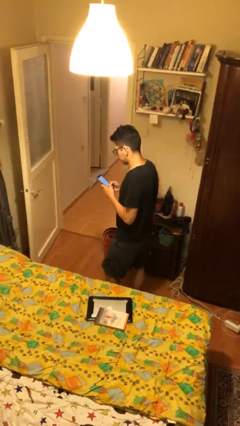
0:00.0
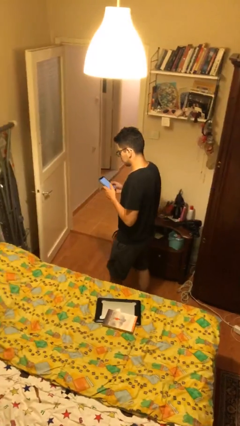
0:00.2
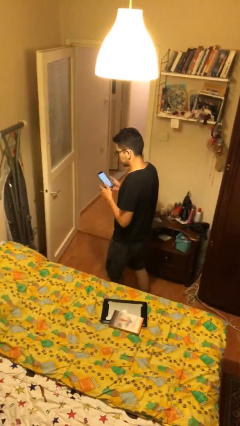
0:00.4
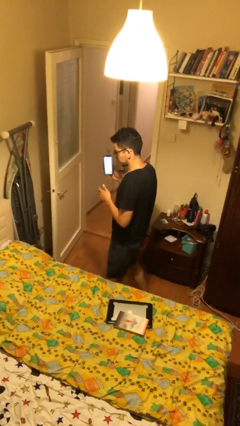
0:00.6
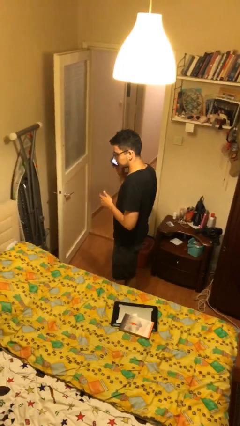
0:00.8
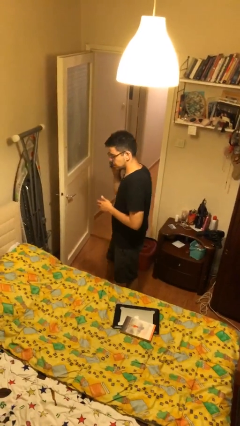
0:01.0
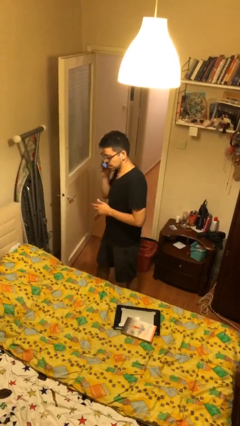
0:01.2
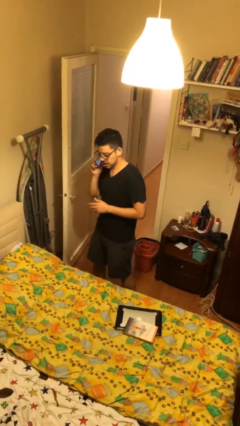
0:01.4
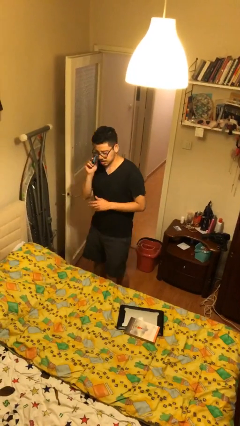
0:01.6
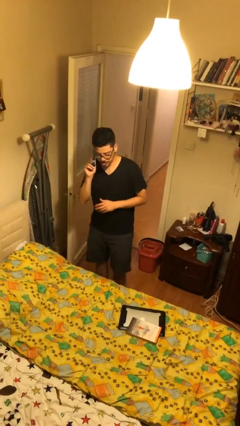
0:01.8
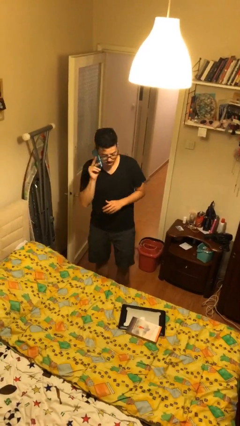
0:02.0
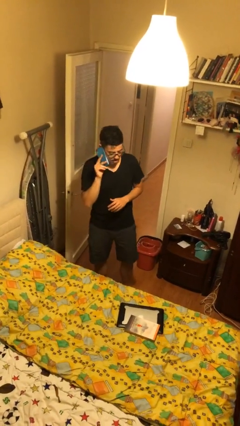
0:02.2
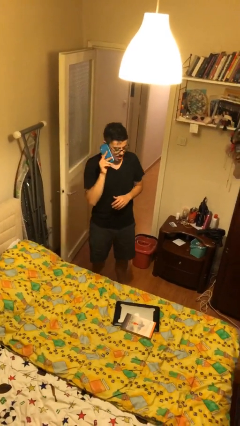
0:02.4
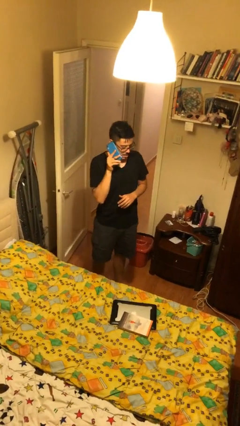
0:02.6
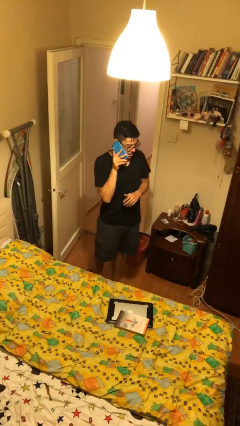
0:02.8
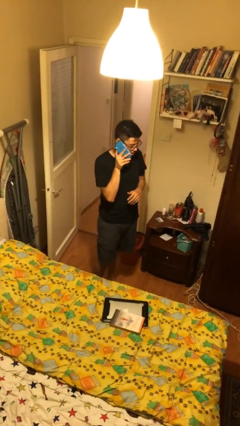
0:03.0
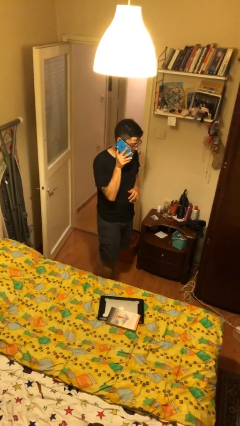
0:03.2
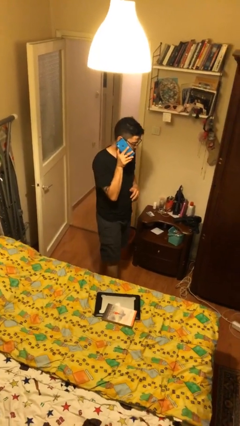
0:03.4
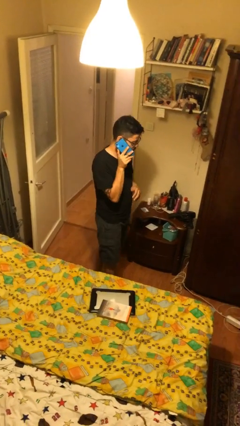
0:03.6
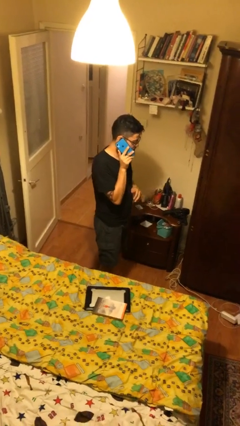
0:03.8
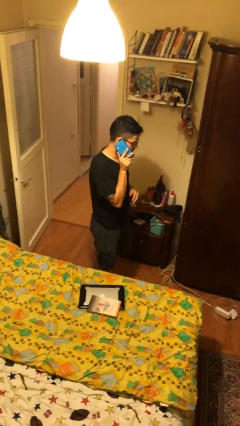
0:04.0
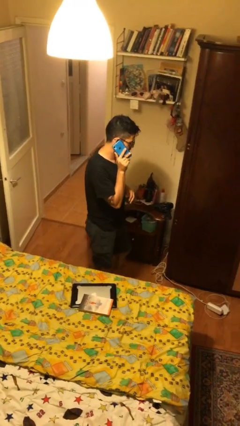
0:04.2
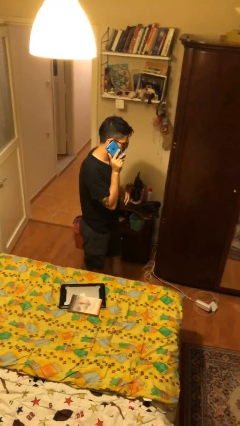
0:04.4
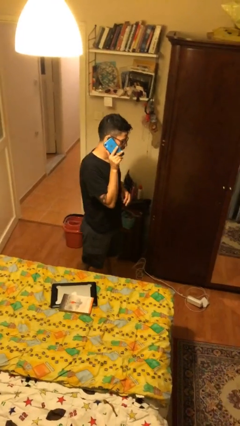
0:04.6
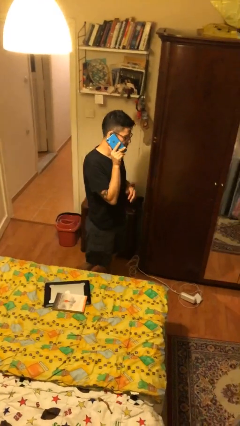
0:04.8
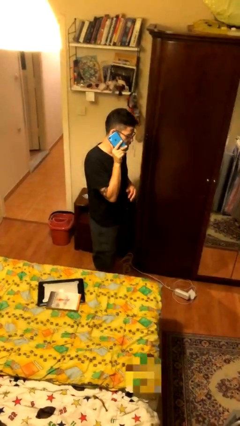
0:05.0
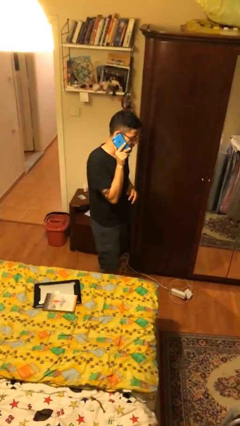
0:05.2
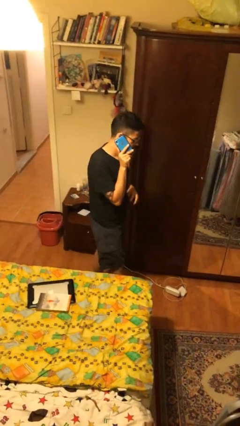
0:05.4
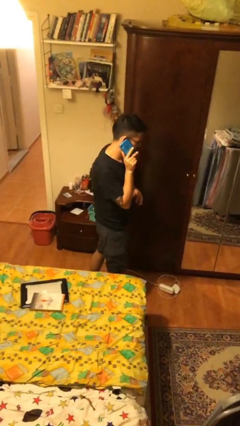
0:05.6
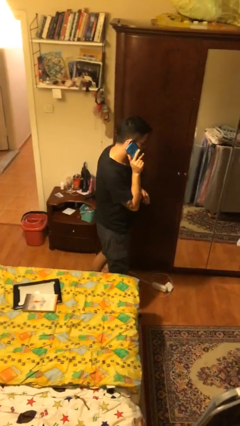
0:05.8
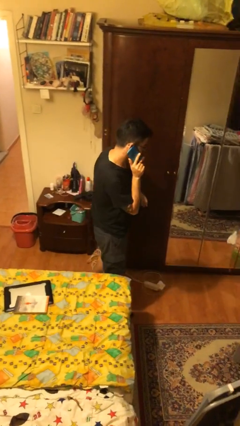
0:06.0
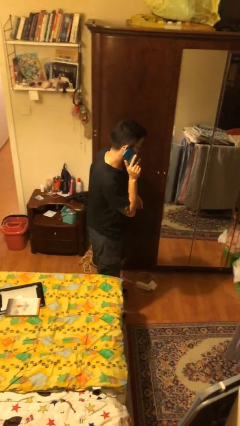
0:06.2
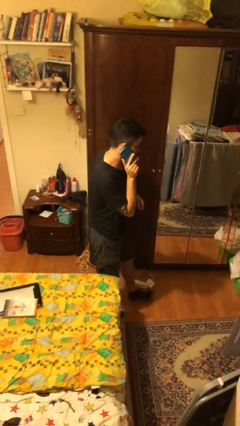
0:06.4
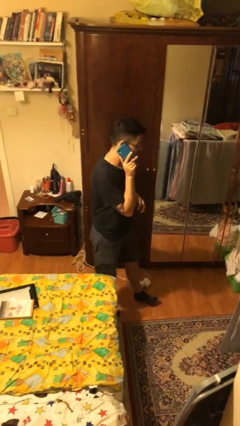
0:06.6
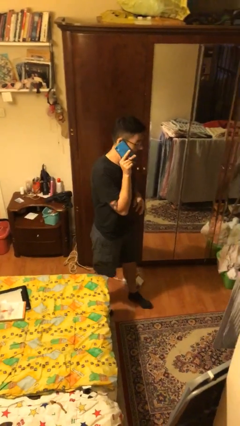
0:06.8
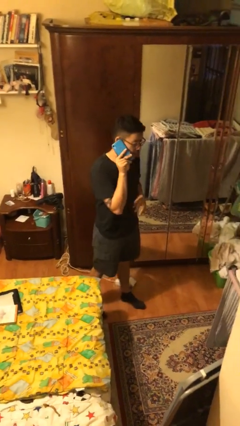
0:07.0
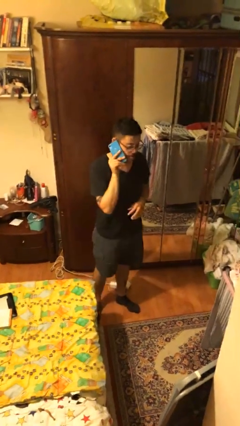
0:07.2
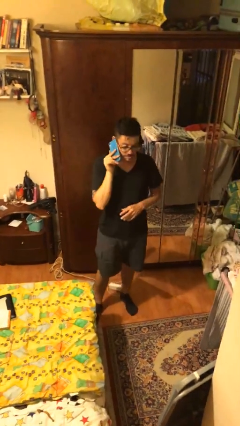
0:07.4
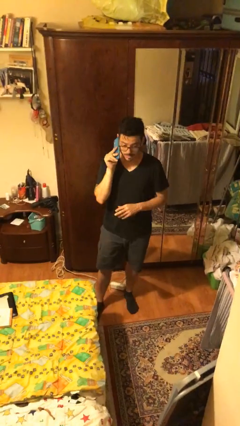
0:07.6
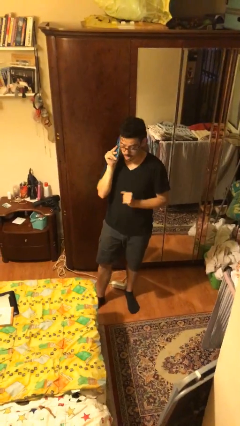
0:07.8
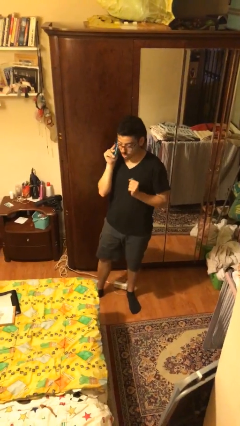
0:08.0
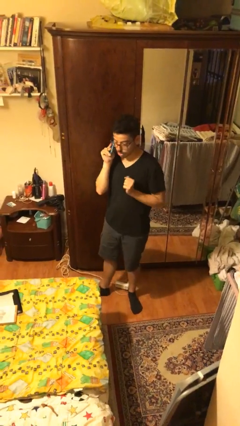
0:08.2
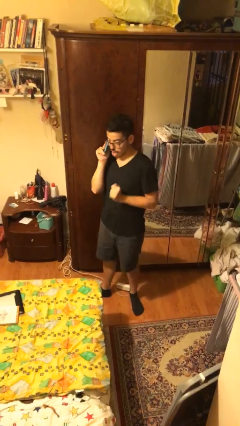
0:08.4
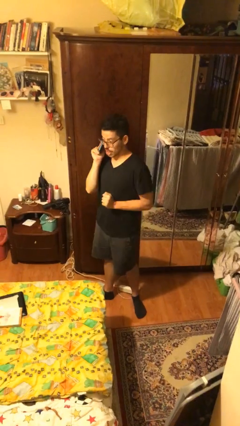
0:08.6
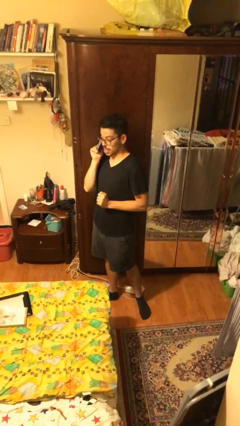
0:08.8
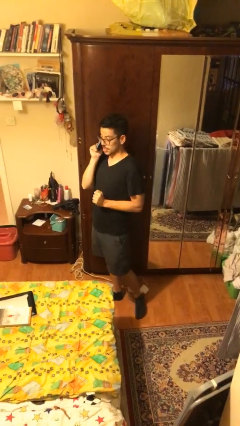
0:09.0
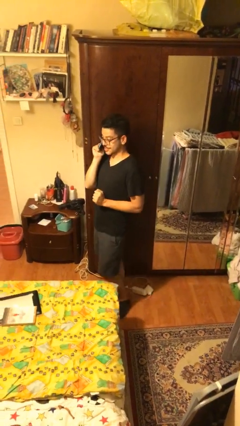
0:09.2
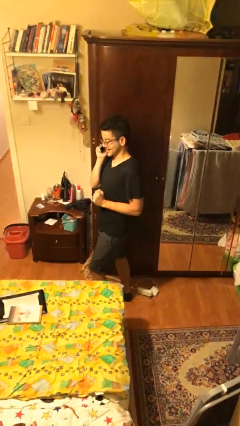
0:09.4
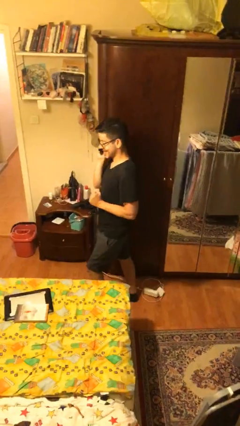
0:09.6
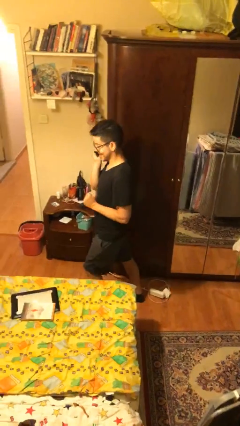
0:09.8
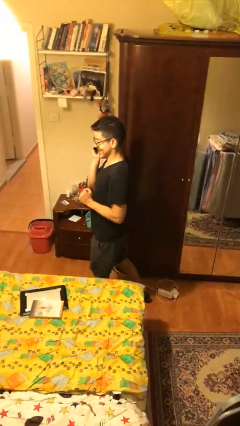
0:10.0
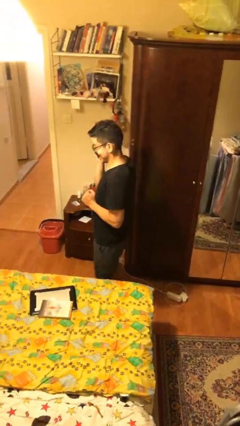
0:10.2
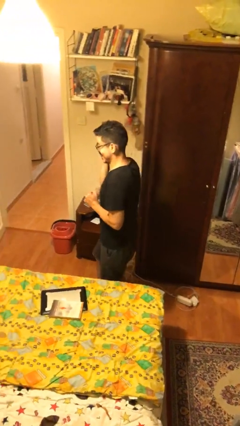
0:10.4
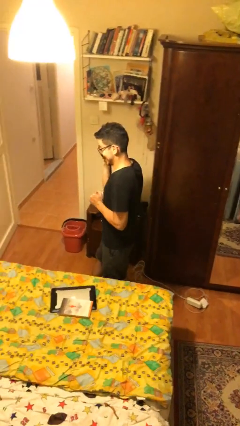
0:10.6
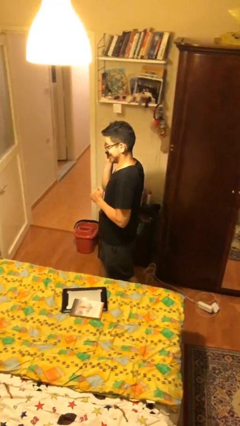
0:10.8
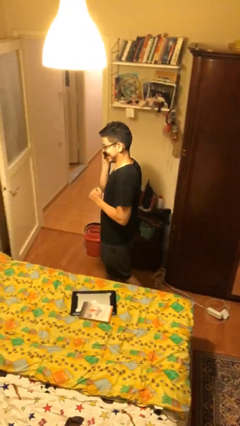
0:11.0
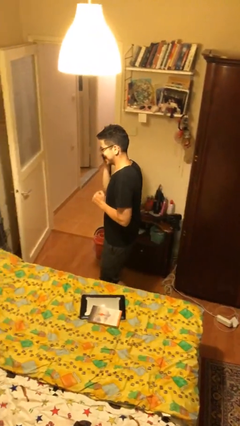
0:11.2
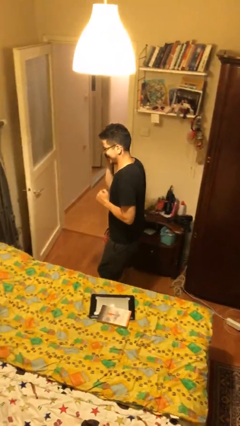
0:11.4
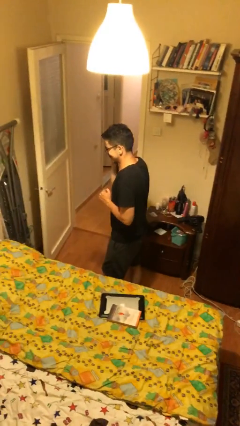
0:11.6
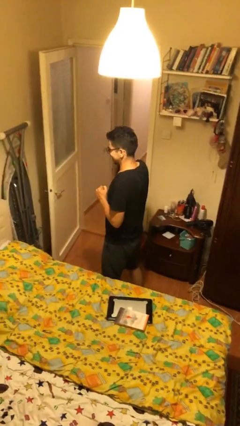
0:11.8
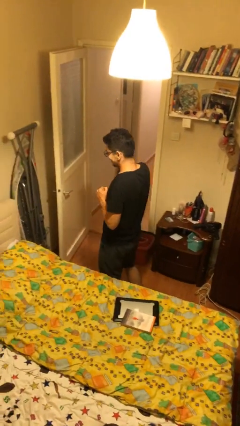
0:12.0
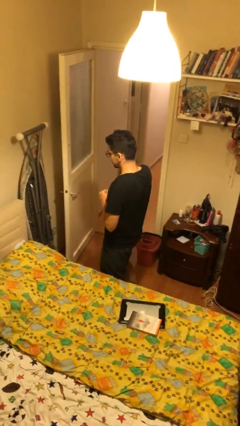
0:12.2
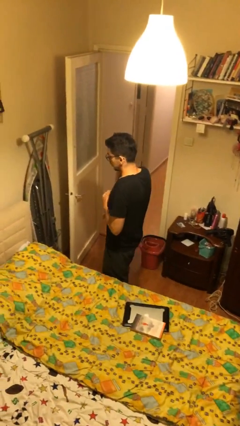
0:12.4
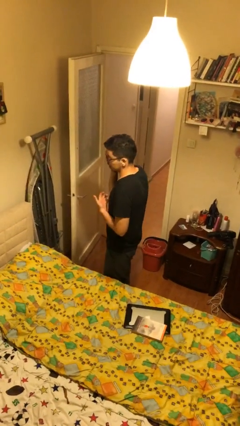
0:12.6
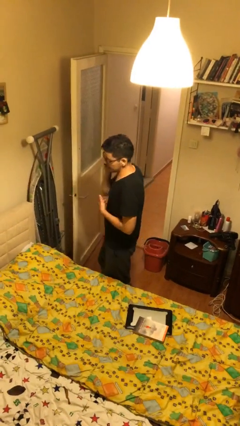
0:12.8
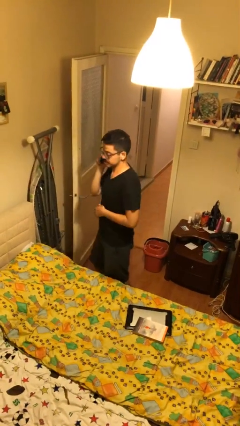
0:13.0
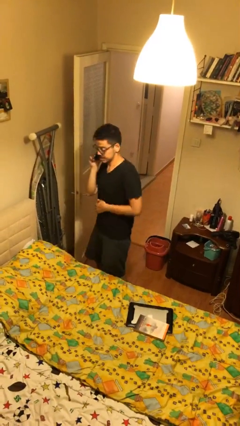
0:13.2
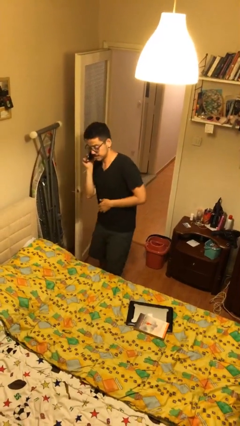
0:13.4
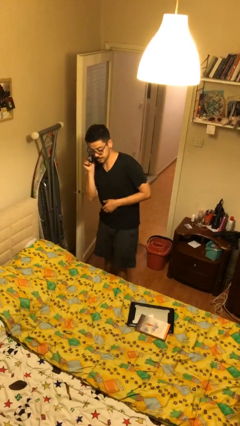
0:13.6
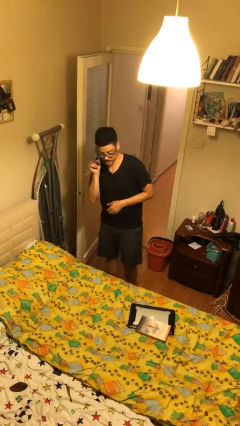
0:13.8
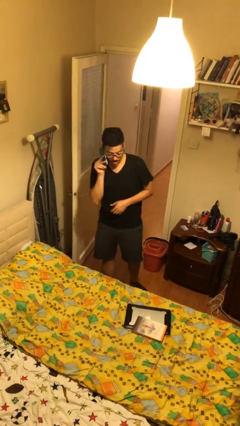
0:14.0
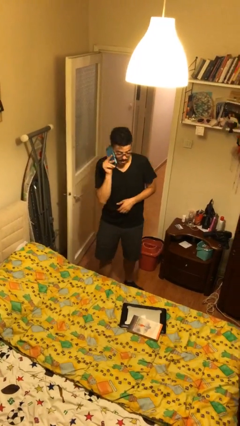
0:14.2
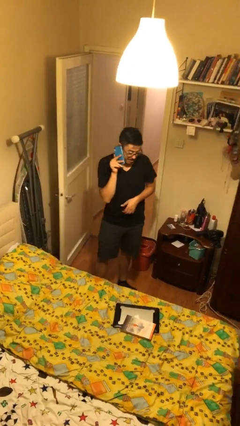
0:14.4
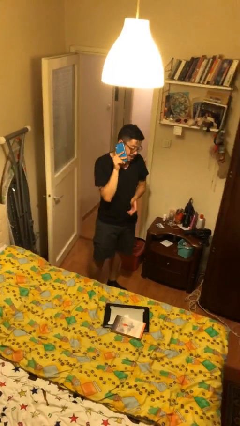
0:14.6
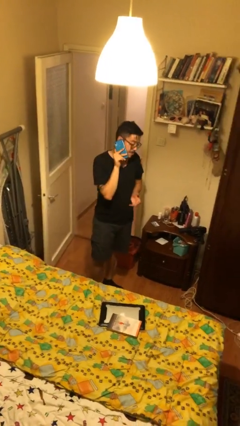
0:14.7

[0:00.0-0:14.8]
person talks on phone

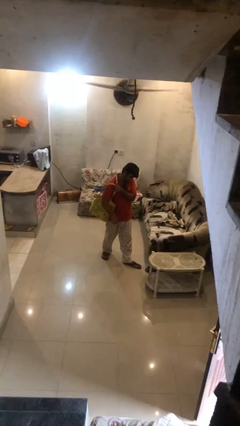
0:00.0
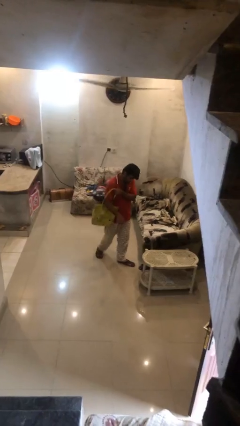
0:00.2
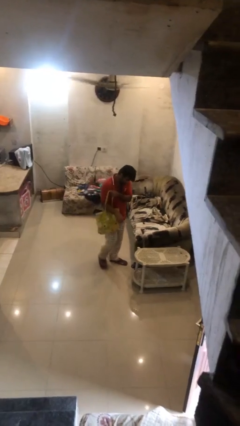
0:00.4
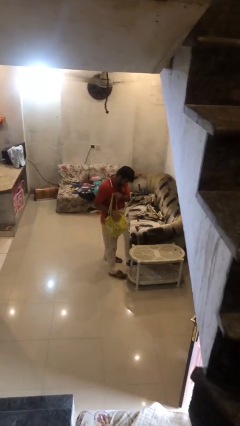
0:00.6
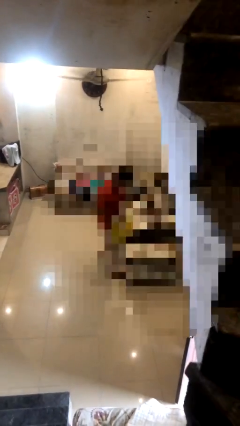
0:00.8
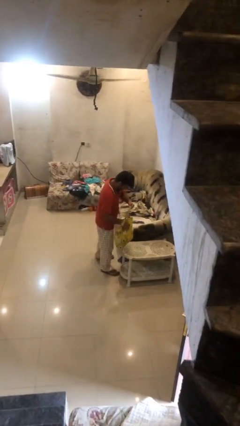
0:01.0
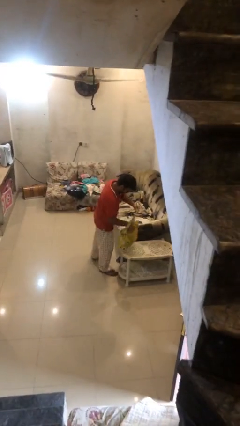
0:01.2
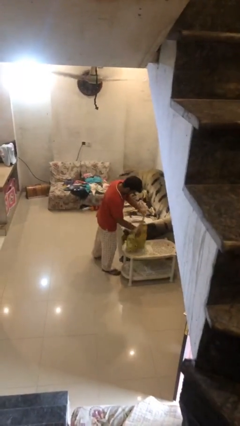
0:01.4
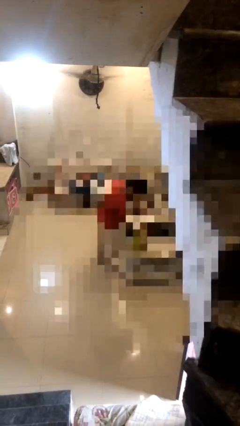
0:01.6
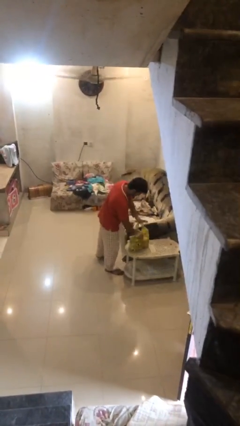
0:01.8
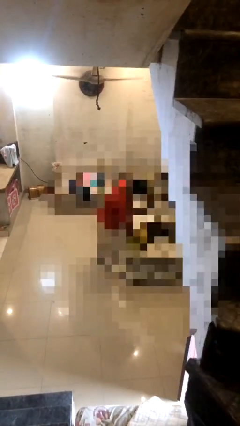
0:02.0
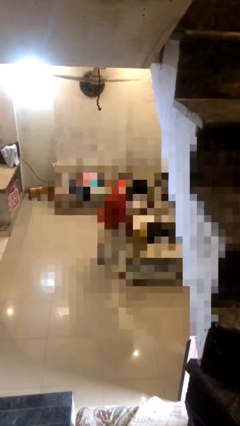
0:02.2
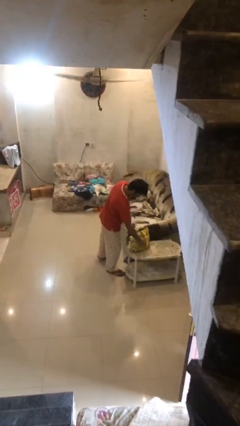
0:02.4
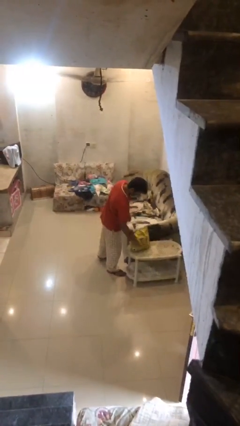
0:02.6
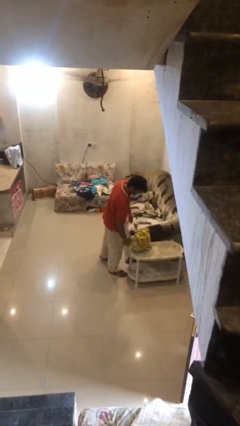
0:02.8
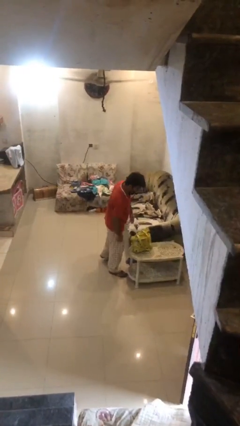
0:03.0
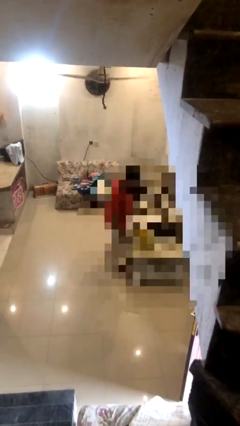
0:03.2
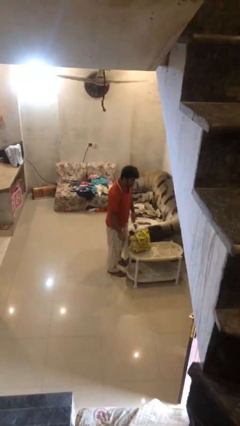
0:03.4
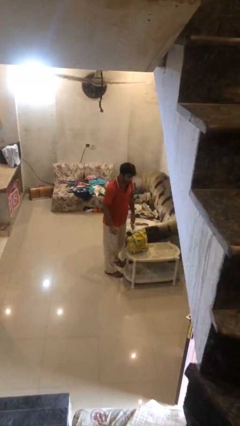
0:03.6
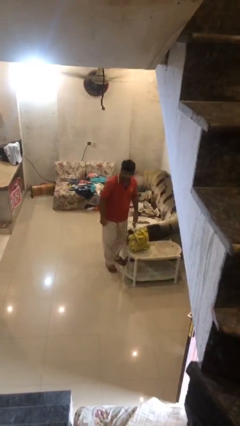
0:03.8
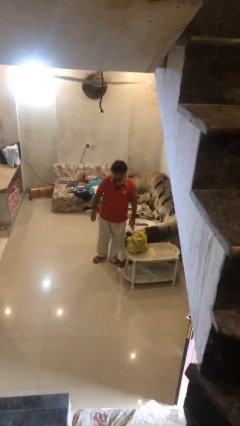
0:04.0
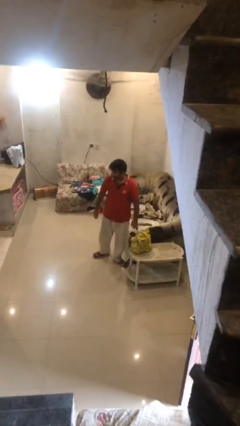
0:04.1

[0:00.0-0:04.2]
person puts down object on table
